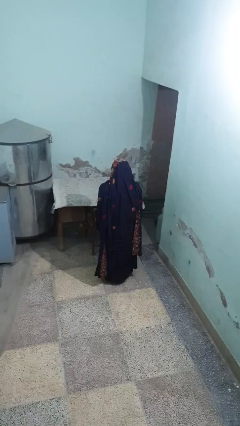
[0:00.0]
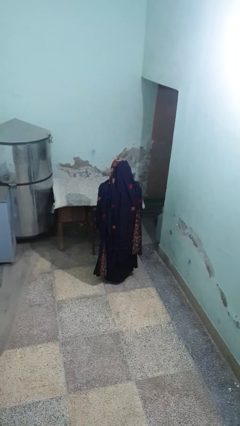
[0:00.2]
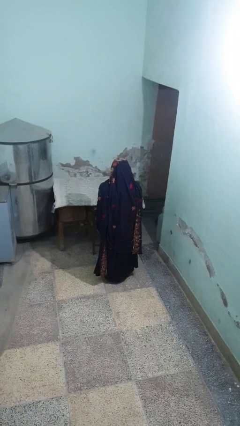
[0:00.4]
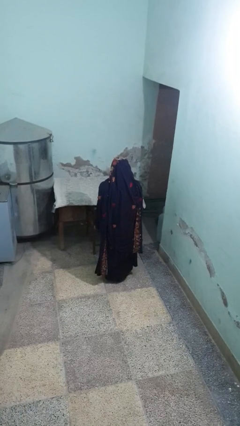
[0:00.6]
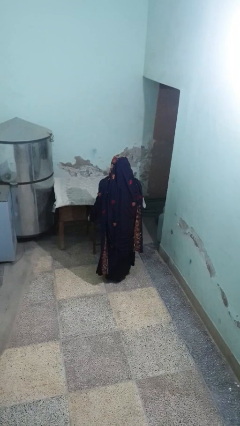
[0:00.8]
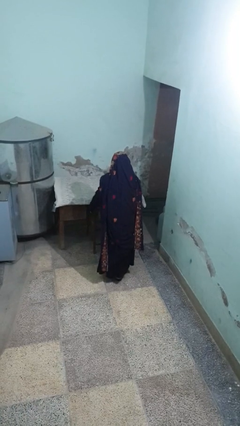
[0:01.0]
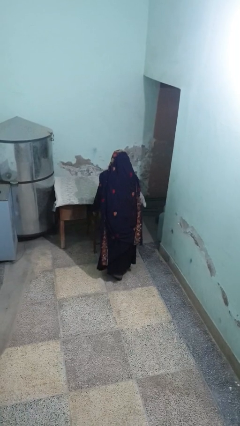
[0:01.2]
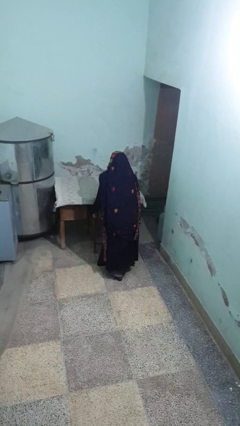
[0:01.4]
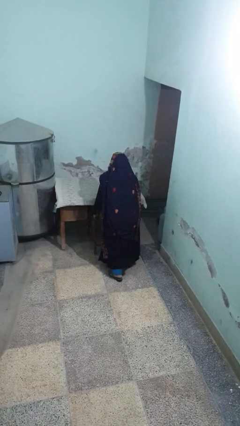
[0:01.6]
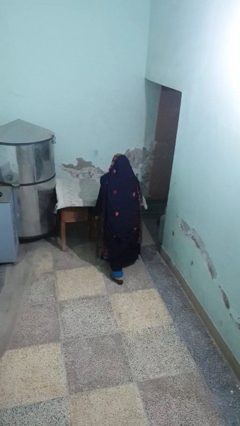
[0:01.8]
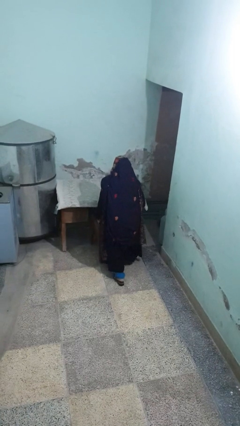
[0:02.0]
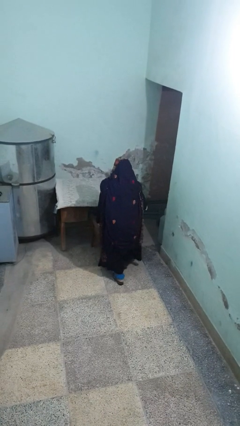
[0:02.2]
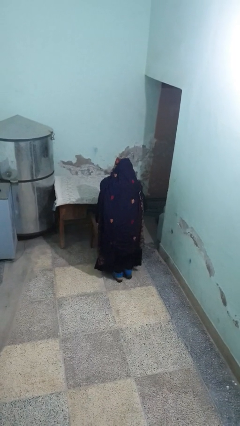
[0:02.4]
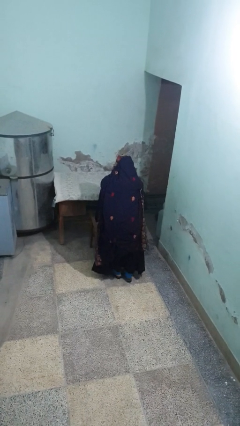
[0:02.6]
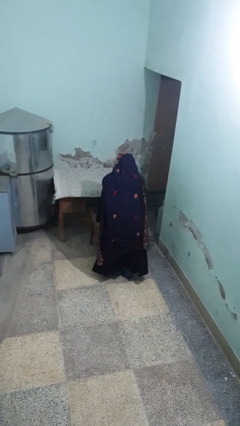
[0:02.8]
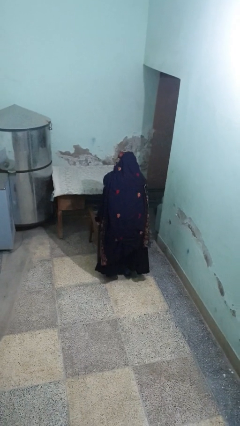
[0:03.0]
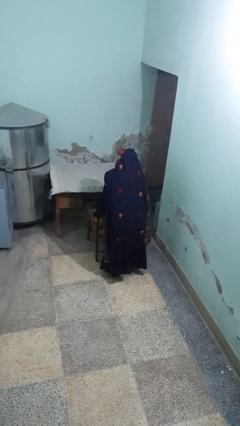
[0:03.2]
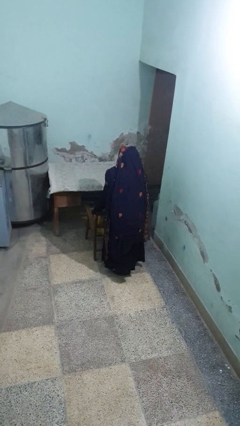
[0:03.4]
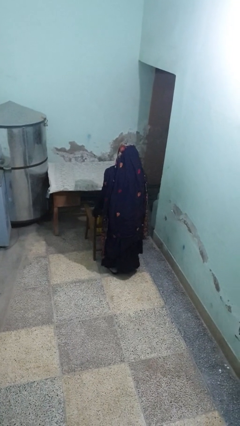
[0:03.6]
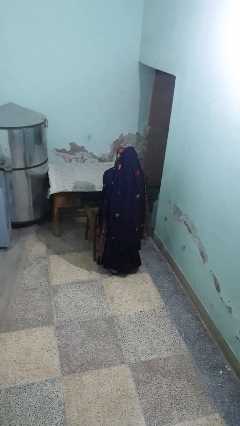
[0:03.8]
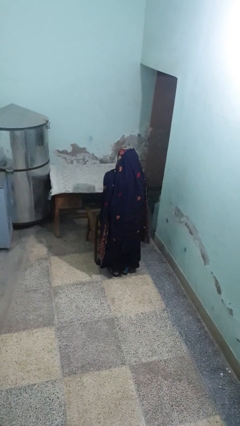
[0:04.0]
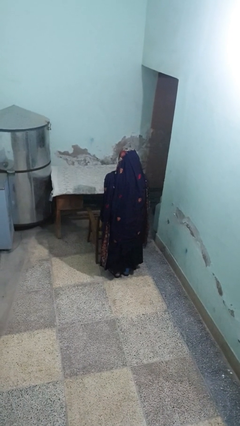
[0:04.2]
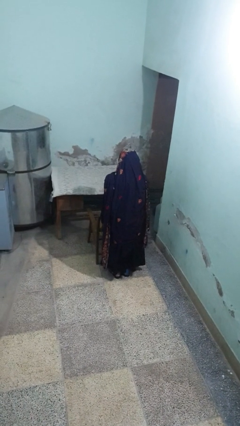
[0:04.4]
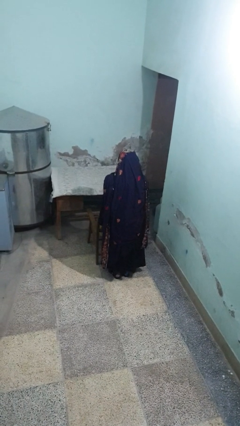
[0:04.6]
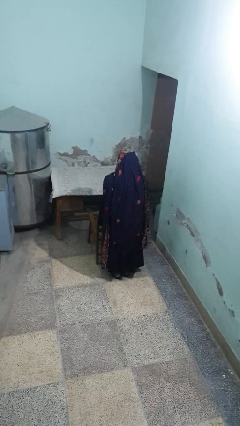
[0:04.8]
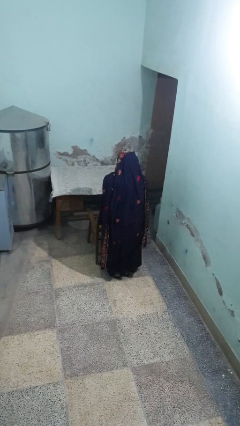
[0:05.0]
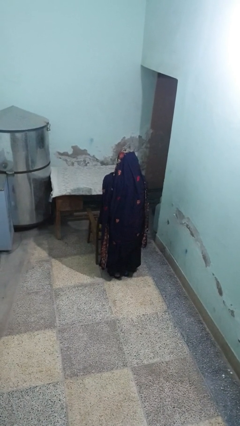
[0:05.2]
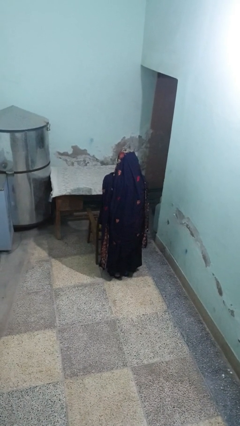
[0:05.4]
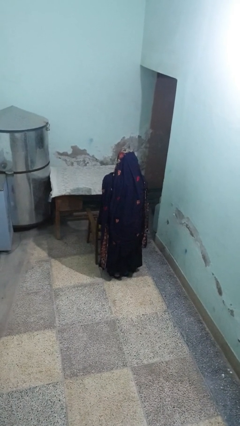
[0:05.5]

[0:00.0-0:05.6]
person pulls out chair

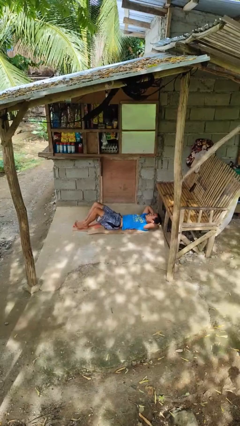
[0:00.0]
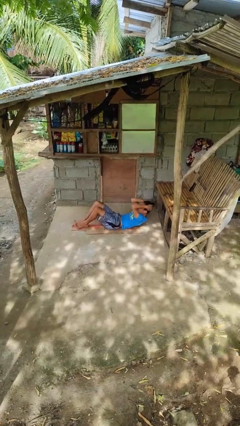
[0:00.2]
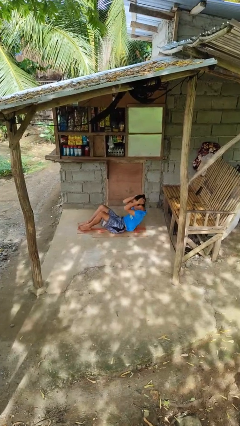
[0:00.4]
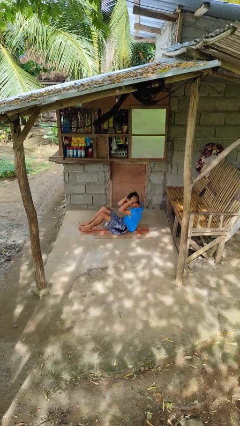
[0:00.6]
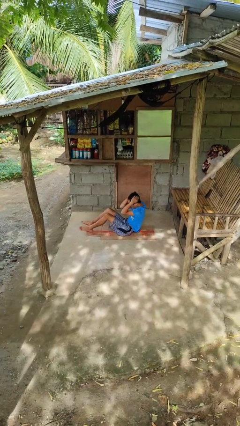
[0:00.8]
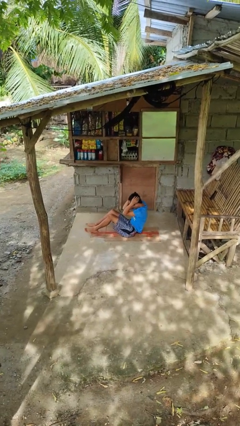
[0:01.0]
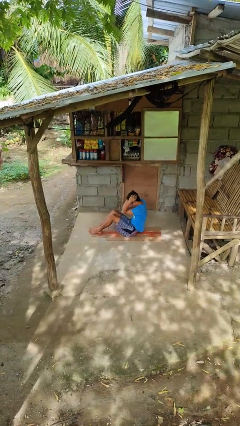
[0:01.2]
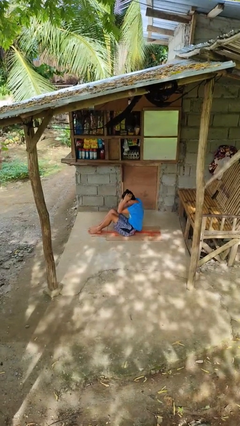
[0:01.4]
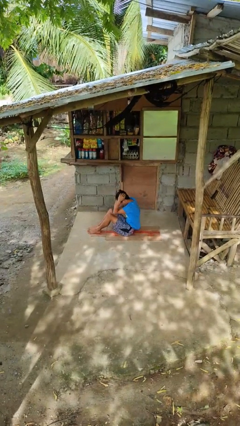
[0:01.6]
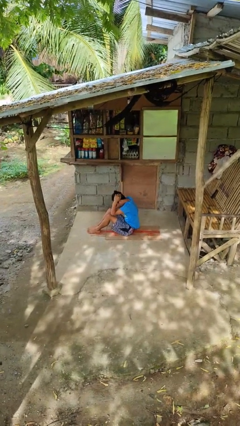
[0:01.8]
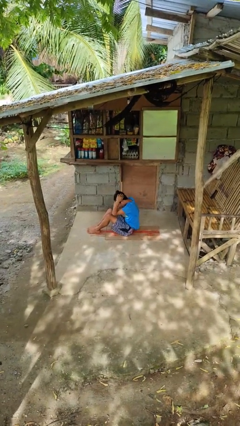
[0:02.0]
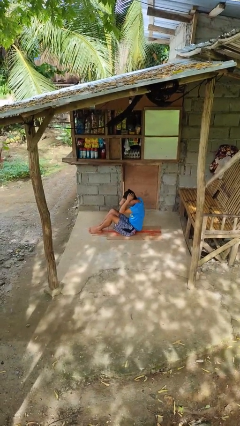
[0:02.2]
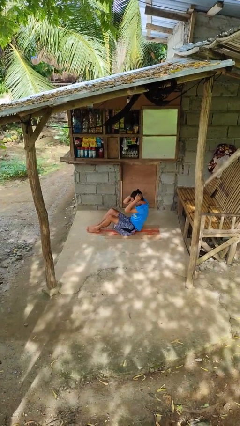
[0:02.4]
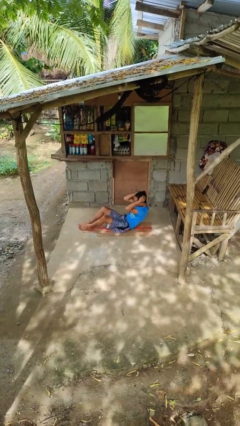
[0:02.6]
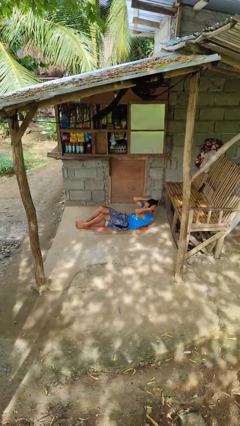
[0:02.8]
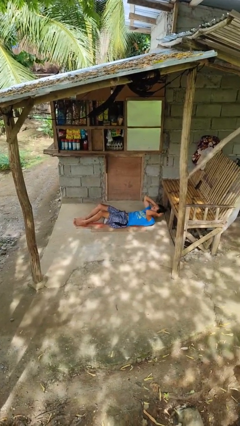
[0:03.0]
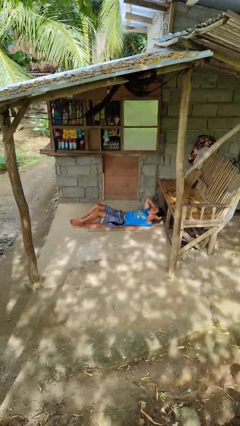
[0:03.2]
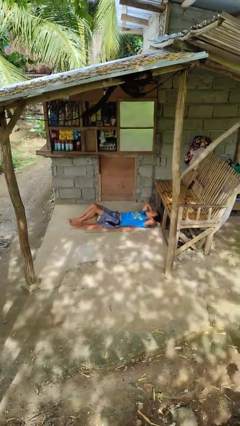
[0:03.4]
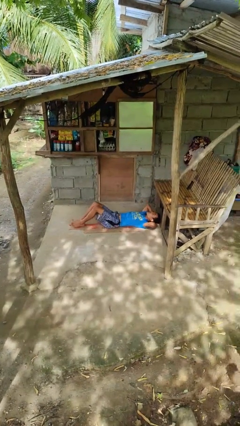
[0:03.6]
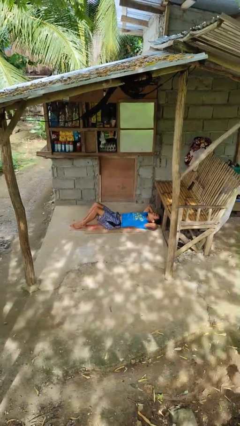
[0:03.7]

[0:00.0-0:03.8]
person exercises with situp

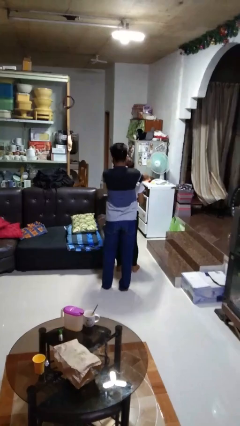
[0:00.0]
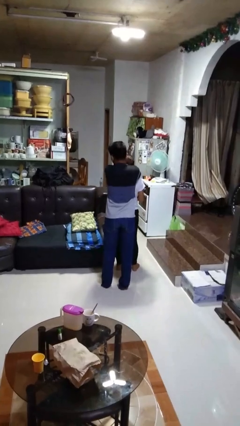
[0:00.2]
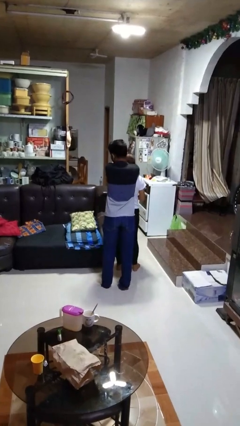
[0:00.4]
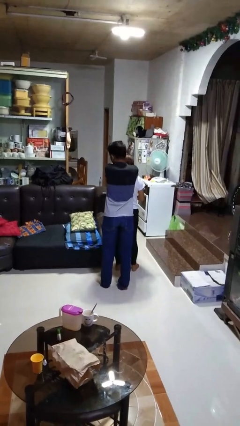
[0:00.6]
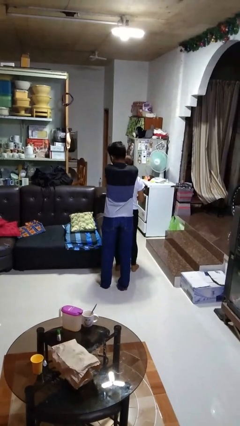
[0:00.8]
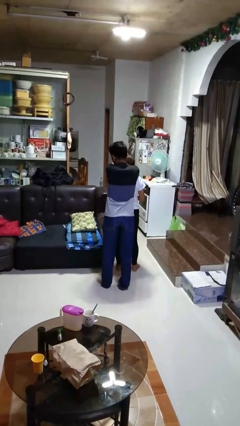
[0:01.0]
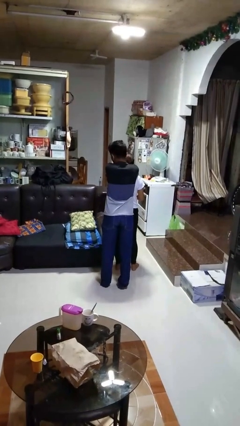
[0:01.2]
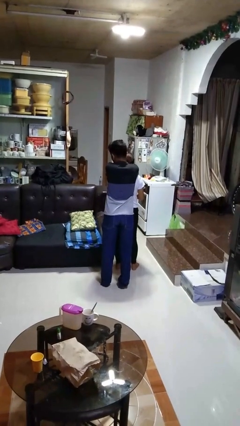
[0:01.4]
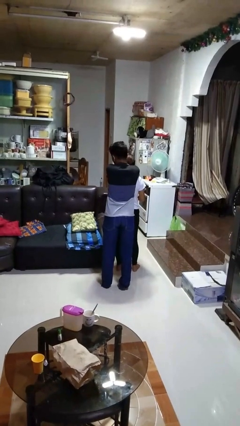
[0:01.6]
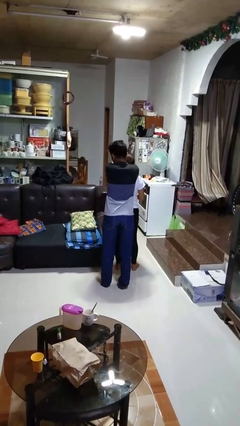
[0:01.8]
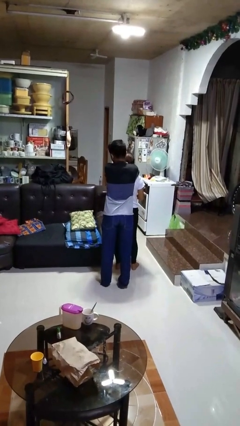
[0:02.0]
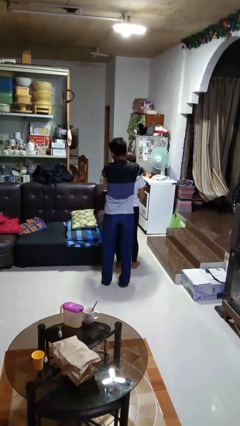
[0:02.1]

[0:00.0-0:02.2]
person hugs person from behind

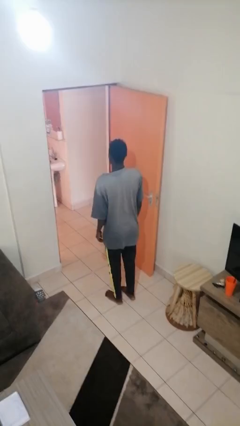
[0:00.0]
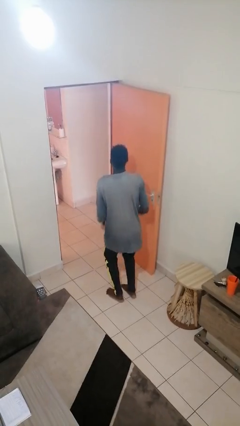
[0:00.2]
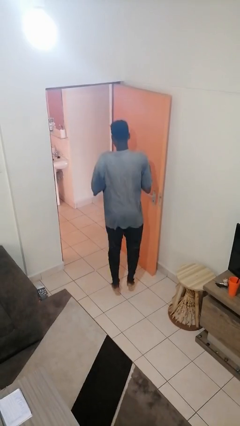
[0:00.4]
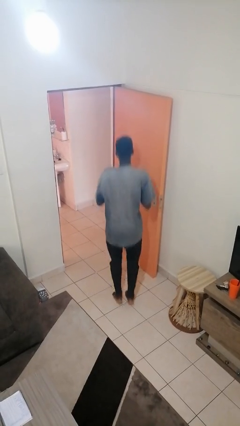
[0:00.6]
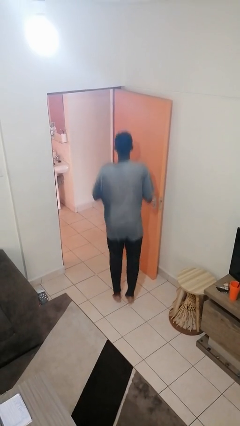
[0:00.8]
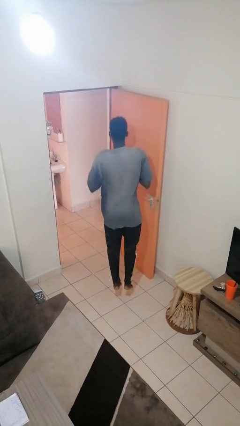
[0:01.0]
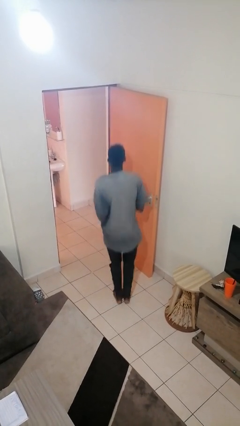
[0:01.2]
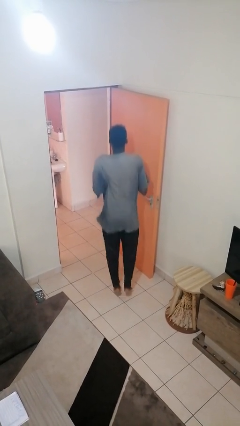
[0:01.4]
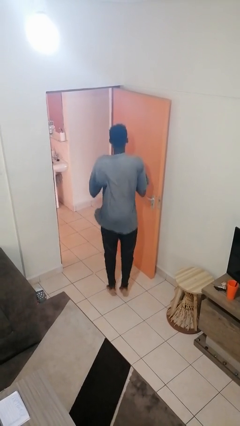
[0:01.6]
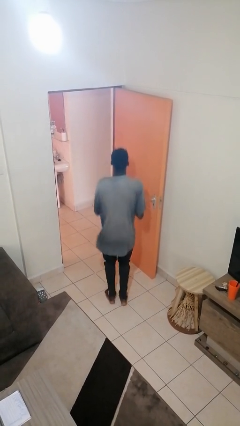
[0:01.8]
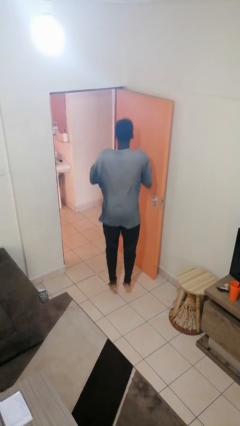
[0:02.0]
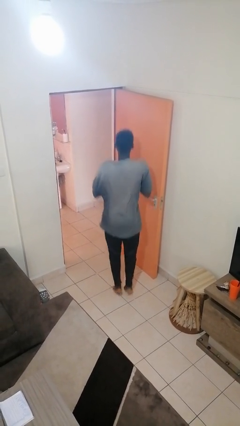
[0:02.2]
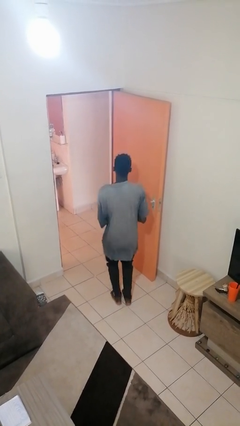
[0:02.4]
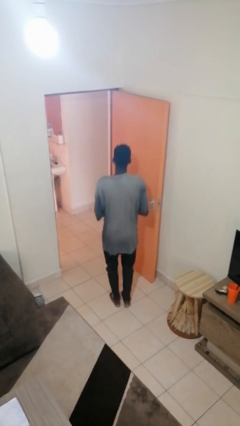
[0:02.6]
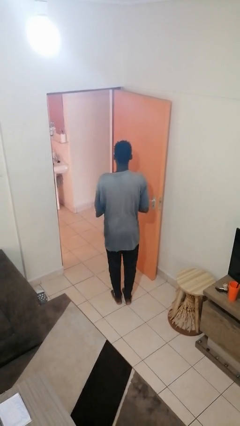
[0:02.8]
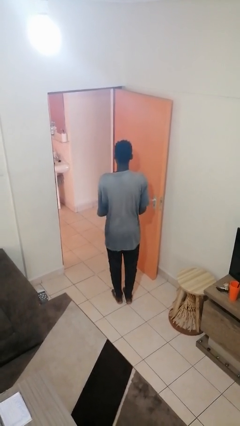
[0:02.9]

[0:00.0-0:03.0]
person jumps

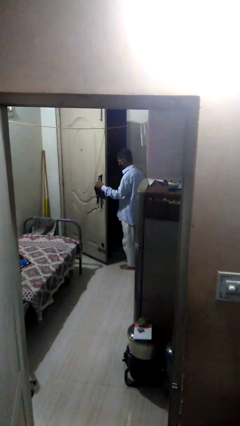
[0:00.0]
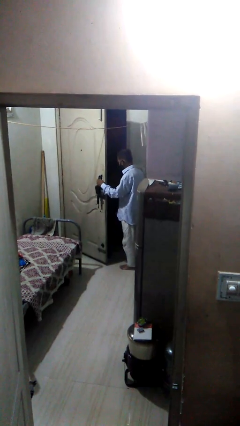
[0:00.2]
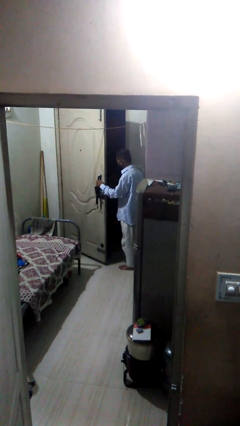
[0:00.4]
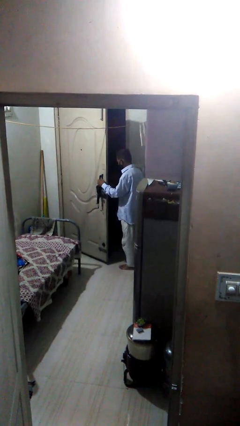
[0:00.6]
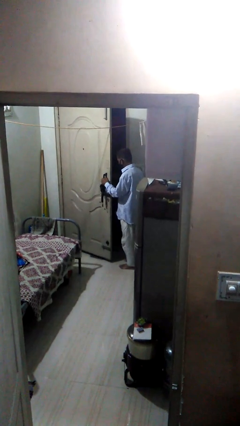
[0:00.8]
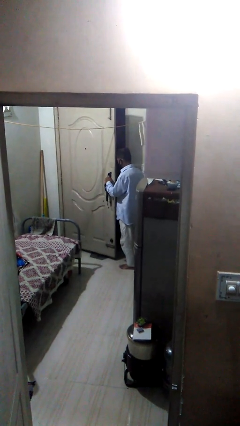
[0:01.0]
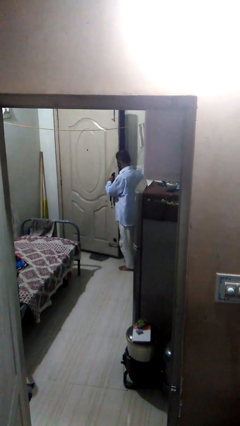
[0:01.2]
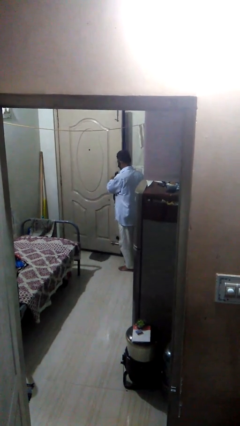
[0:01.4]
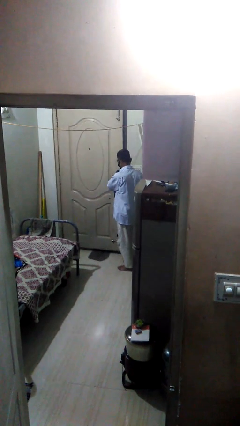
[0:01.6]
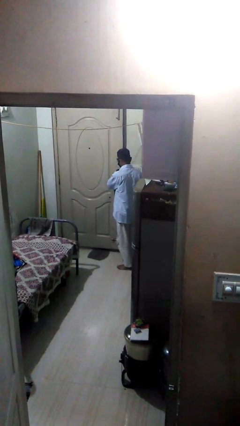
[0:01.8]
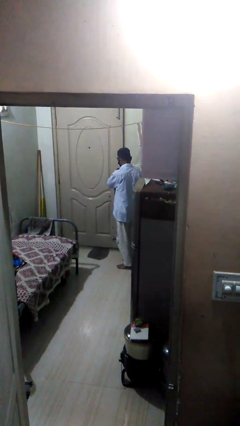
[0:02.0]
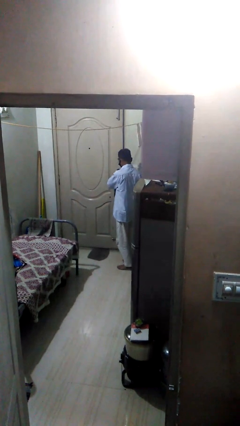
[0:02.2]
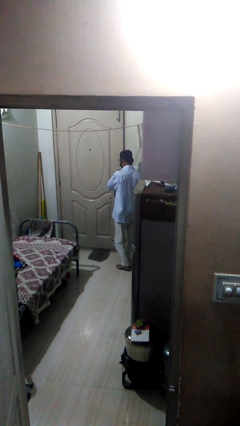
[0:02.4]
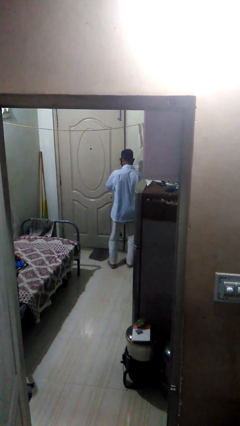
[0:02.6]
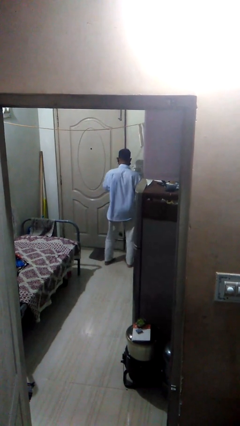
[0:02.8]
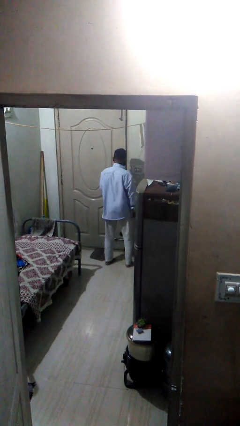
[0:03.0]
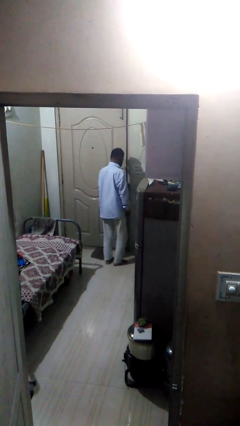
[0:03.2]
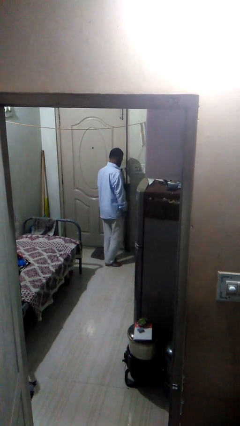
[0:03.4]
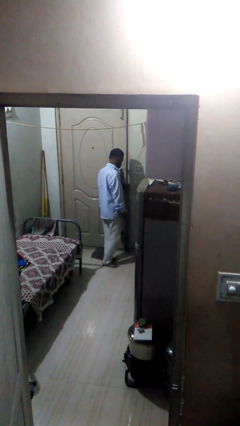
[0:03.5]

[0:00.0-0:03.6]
person closes facility door
